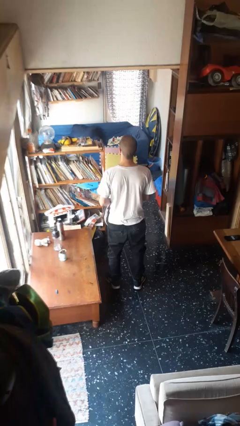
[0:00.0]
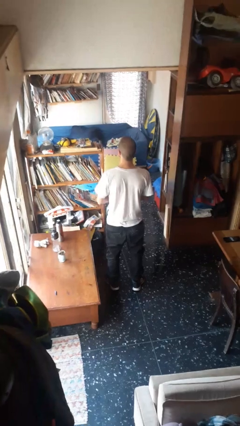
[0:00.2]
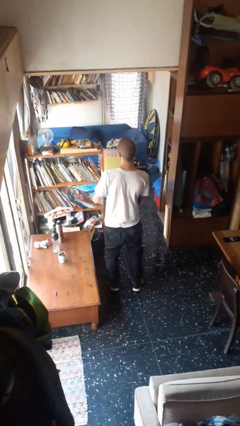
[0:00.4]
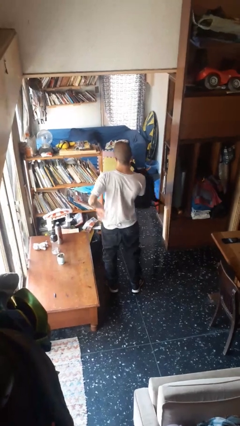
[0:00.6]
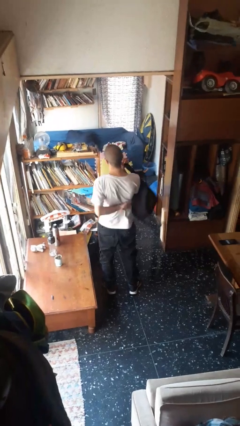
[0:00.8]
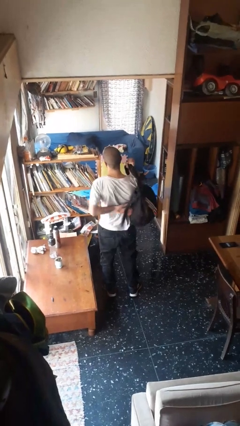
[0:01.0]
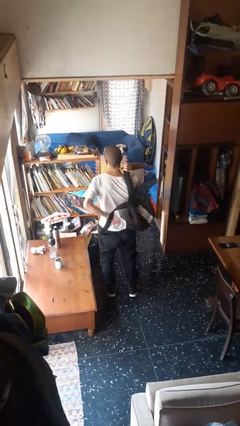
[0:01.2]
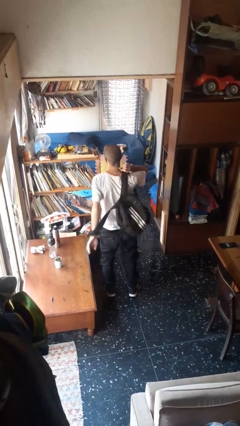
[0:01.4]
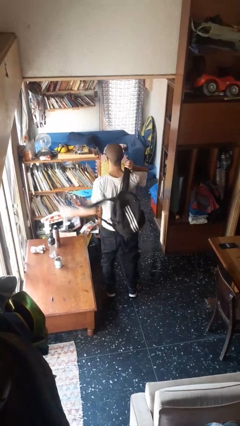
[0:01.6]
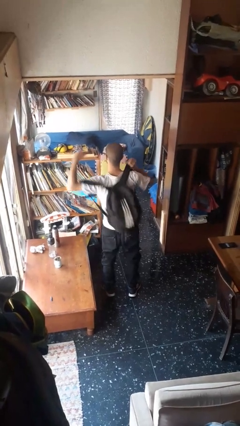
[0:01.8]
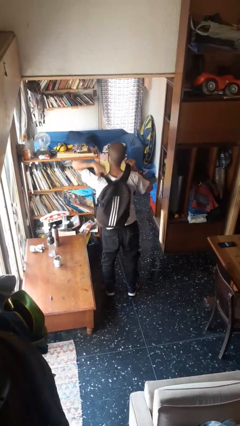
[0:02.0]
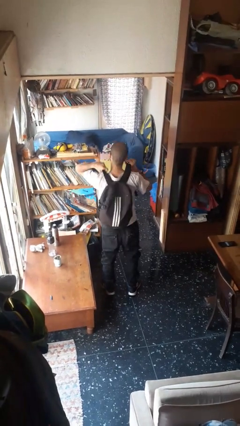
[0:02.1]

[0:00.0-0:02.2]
person puts on backpack

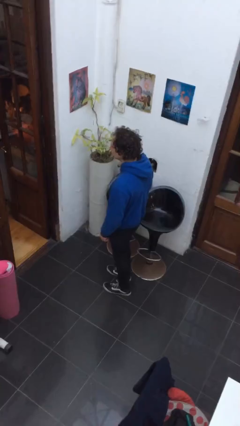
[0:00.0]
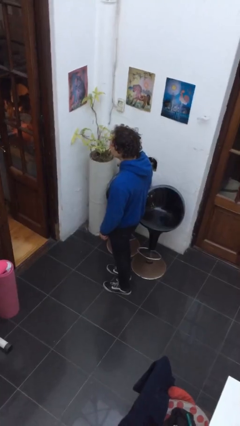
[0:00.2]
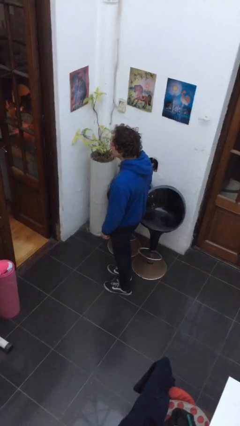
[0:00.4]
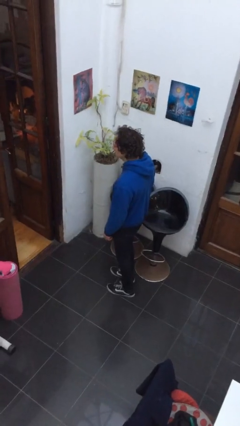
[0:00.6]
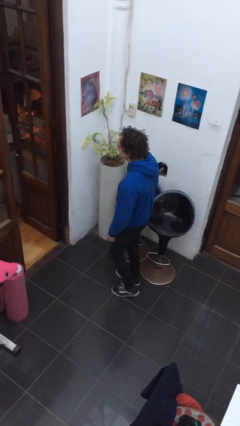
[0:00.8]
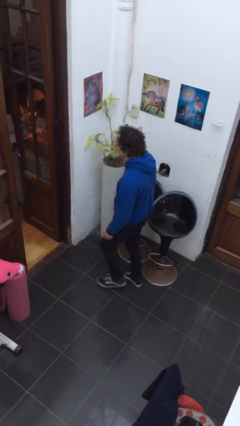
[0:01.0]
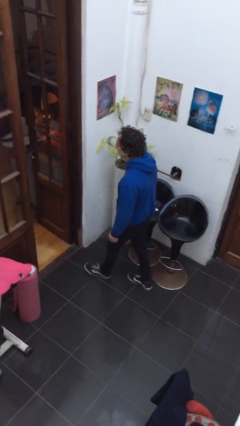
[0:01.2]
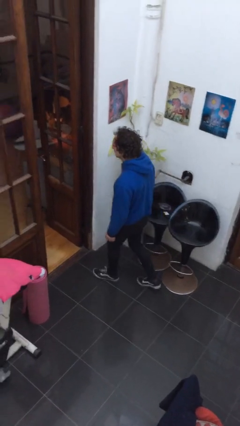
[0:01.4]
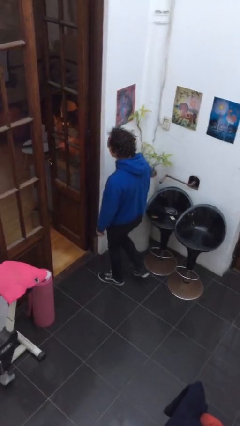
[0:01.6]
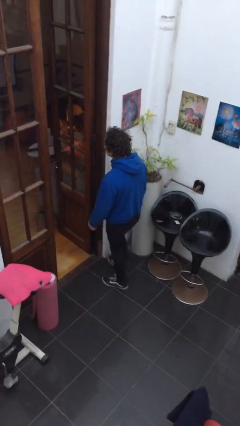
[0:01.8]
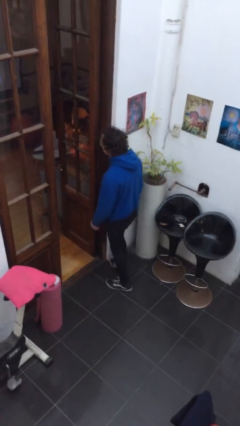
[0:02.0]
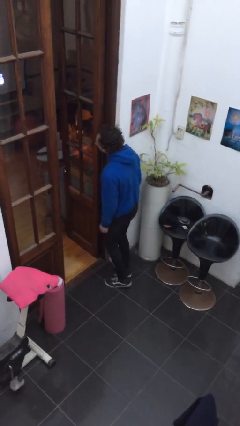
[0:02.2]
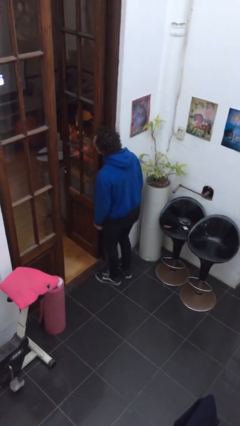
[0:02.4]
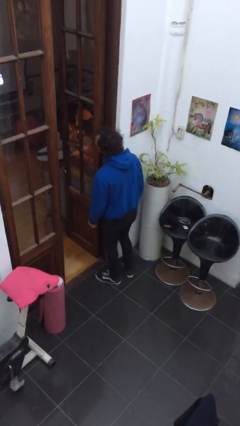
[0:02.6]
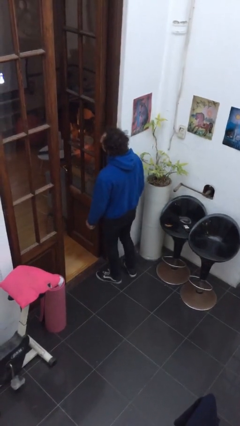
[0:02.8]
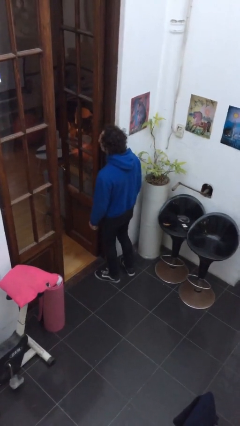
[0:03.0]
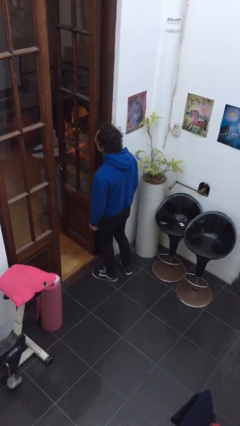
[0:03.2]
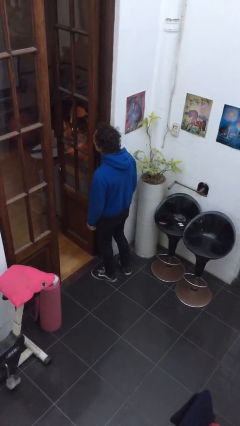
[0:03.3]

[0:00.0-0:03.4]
person bumps into wall

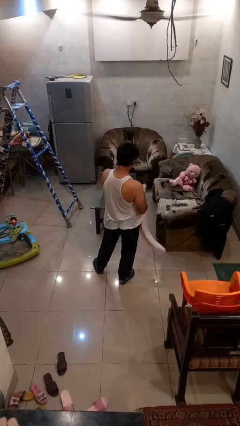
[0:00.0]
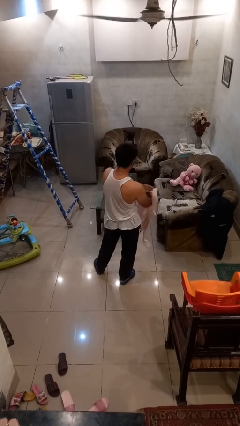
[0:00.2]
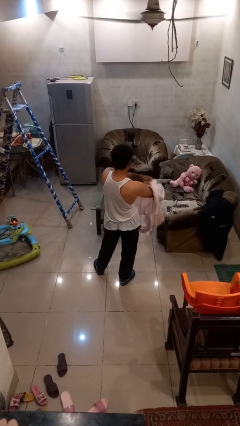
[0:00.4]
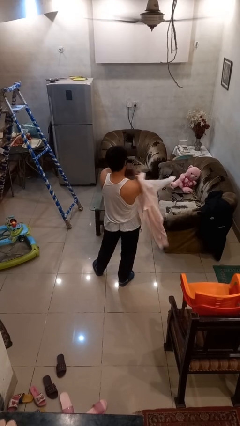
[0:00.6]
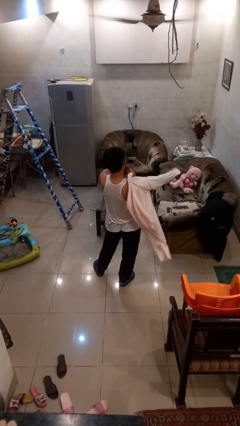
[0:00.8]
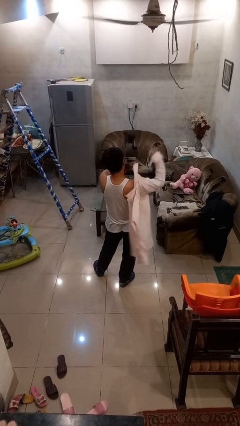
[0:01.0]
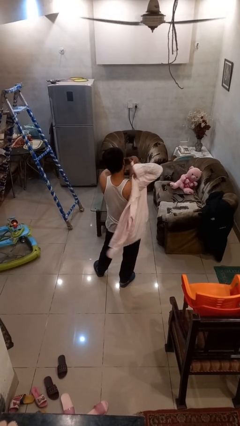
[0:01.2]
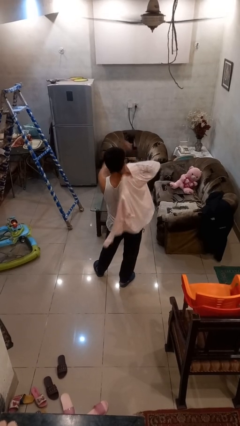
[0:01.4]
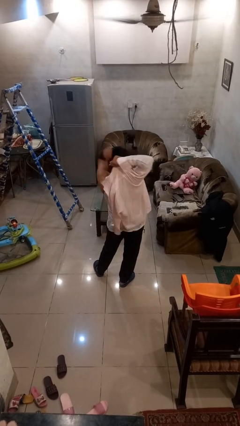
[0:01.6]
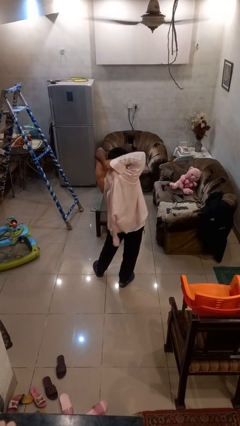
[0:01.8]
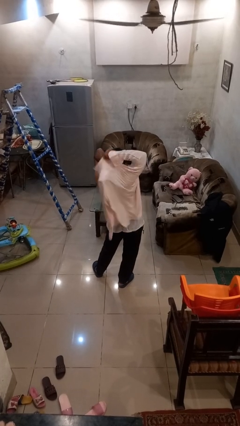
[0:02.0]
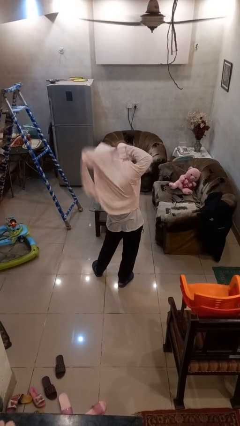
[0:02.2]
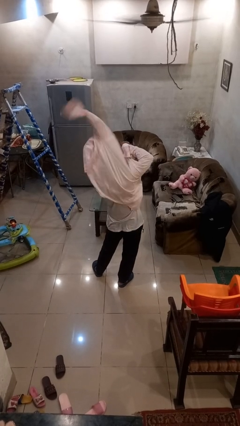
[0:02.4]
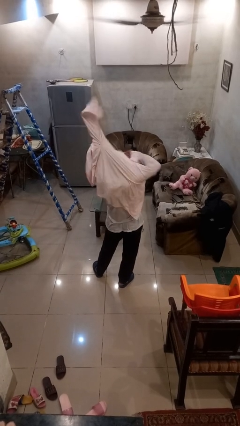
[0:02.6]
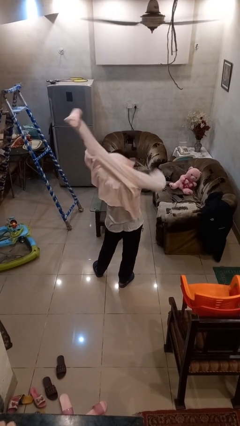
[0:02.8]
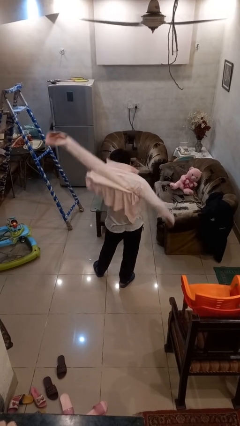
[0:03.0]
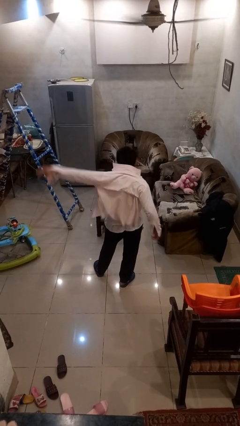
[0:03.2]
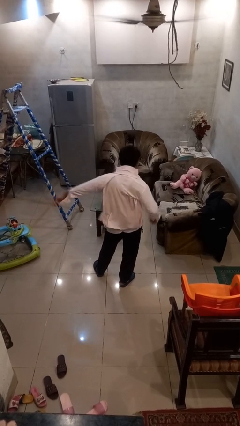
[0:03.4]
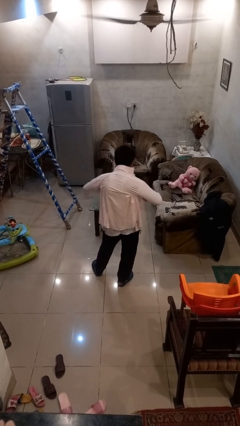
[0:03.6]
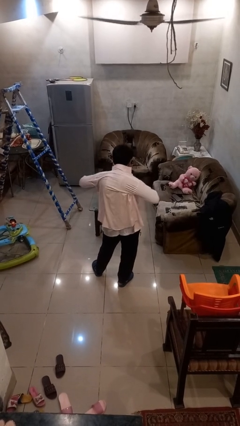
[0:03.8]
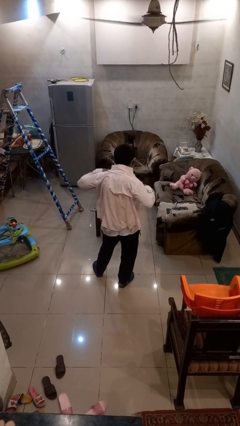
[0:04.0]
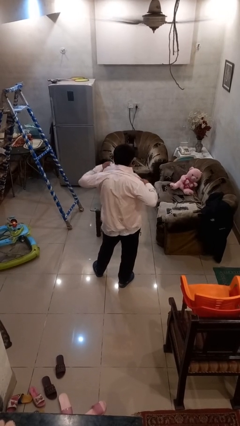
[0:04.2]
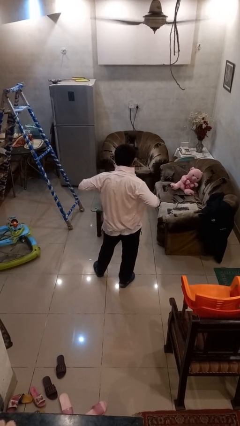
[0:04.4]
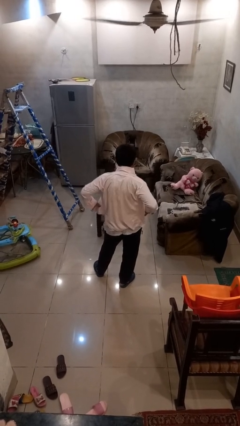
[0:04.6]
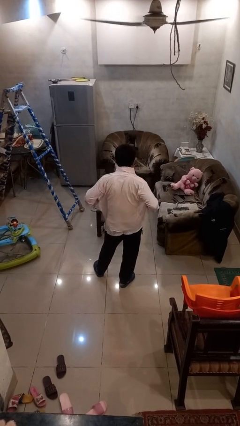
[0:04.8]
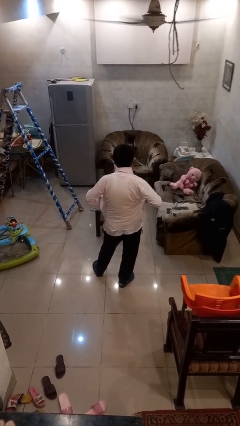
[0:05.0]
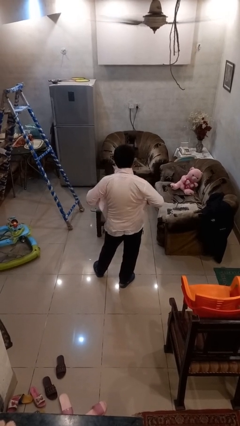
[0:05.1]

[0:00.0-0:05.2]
person puts on shirt

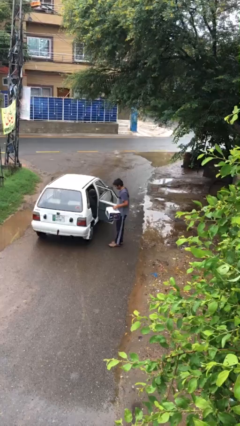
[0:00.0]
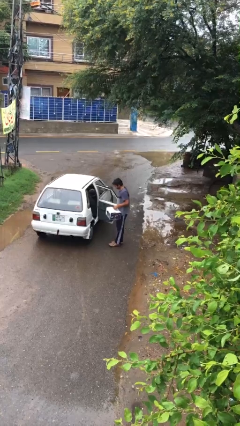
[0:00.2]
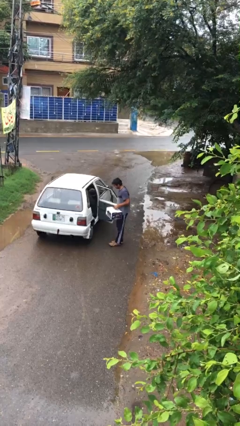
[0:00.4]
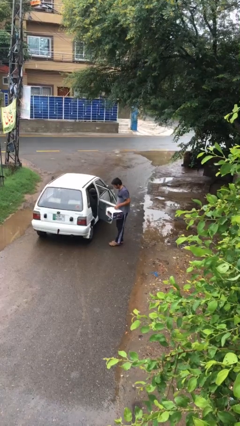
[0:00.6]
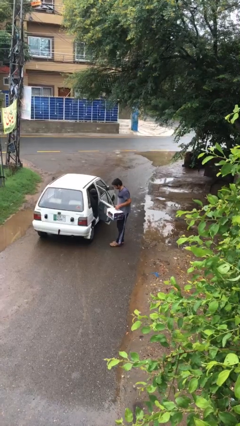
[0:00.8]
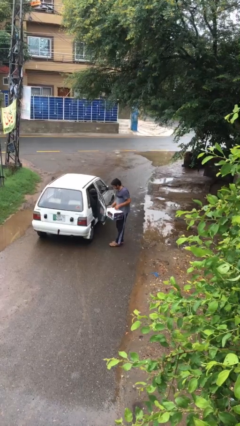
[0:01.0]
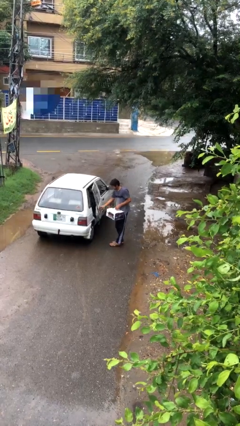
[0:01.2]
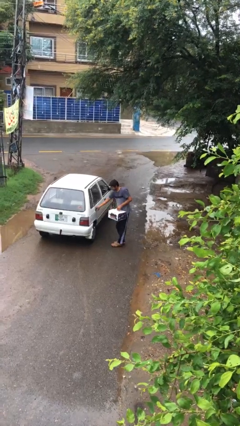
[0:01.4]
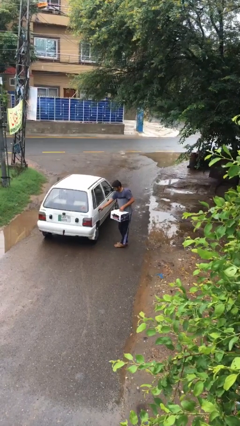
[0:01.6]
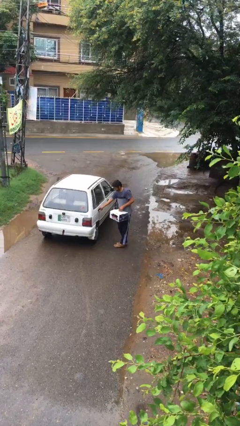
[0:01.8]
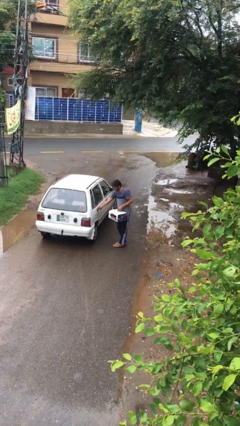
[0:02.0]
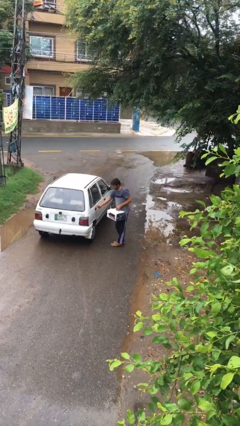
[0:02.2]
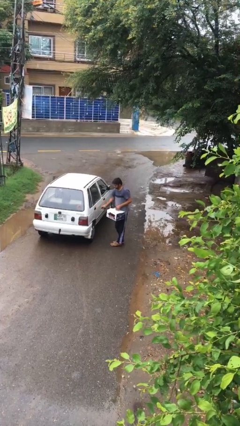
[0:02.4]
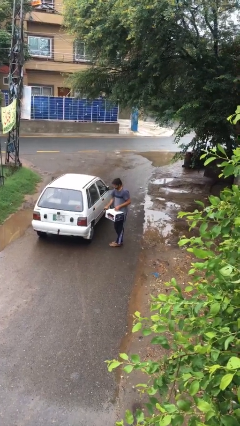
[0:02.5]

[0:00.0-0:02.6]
person closes car door

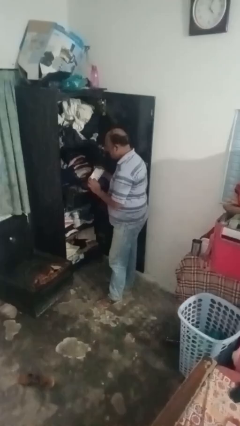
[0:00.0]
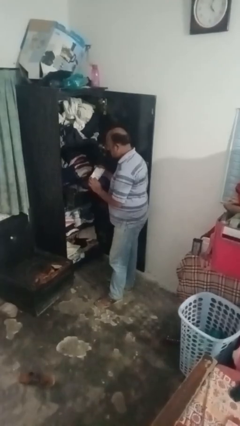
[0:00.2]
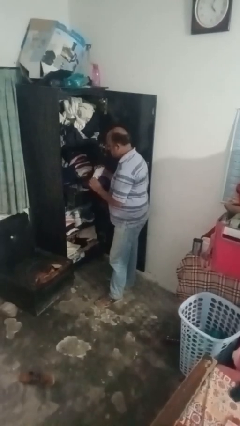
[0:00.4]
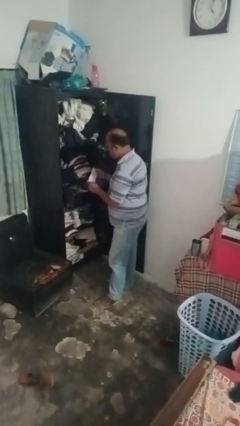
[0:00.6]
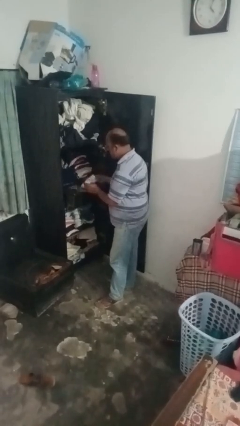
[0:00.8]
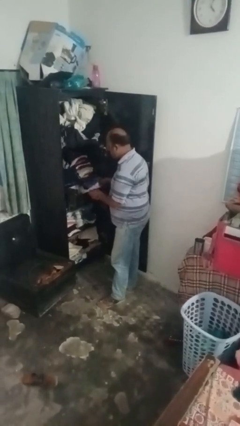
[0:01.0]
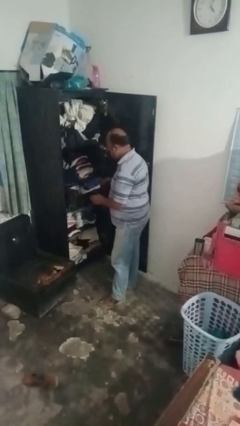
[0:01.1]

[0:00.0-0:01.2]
person takes clothes from dresser

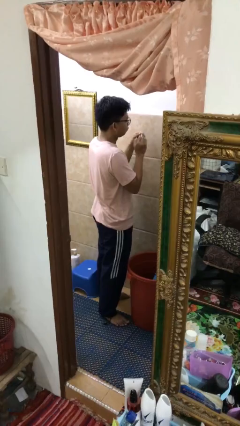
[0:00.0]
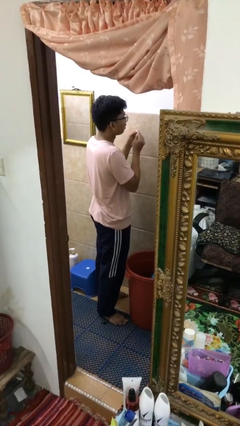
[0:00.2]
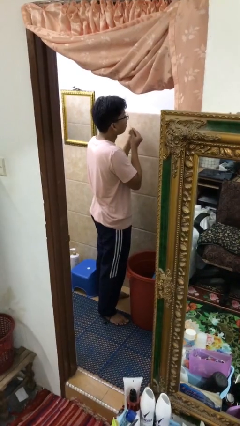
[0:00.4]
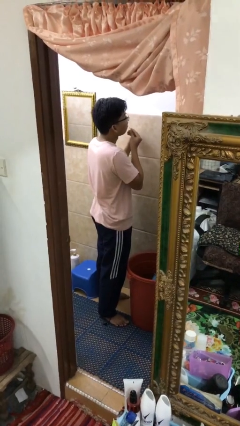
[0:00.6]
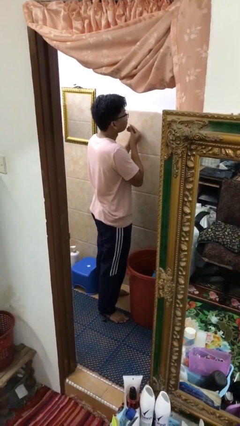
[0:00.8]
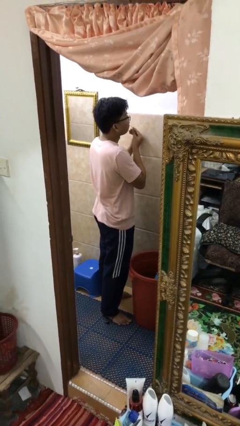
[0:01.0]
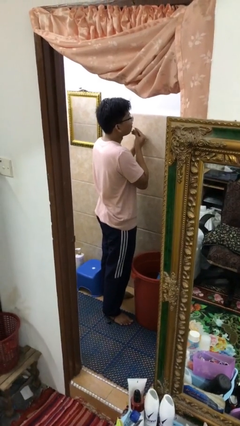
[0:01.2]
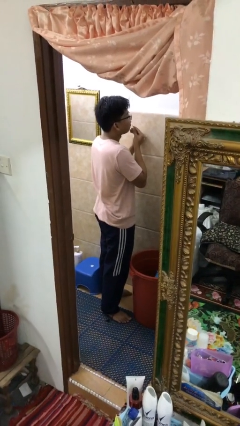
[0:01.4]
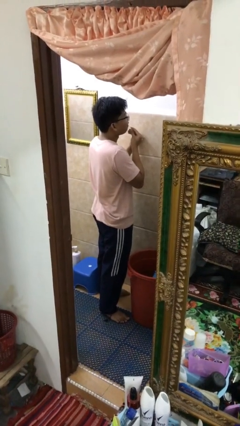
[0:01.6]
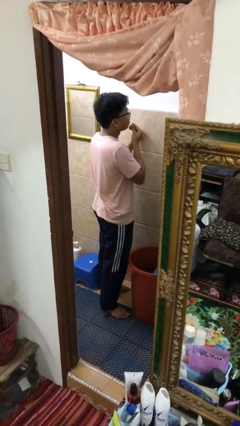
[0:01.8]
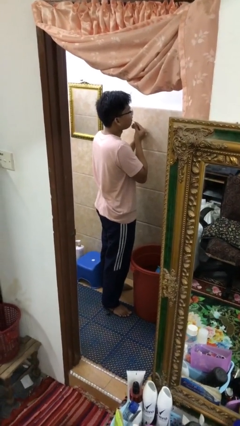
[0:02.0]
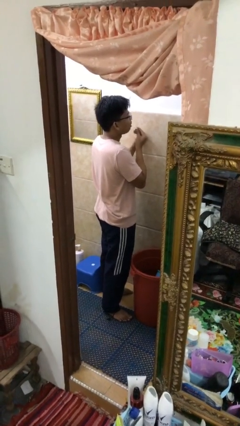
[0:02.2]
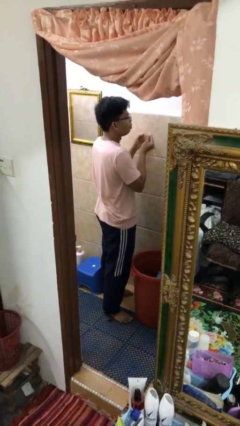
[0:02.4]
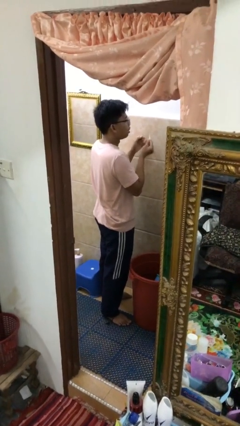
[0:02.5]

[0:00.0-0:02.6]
person flosses
